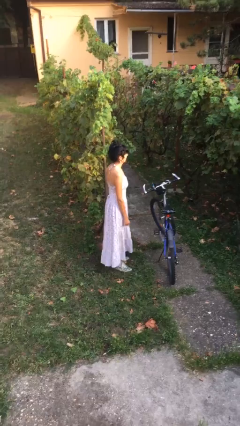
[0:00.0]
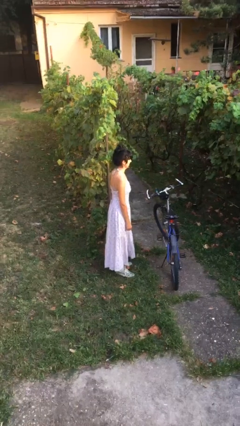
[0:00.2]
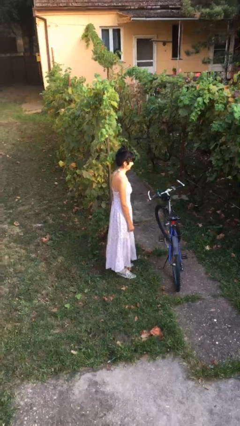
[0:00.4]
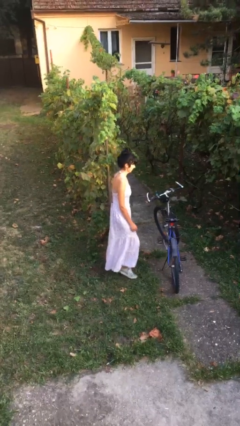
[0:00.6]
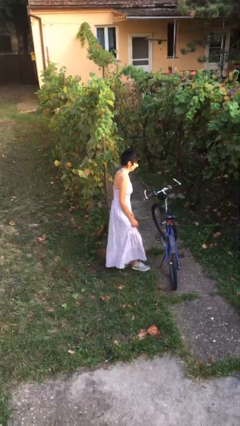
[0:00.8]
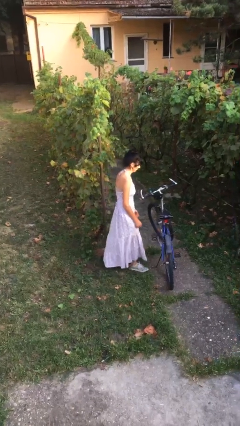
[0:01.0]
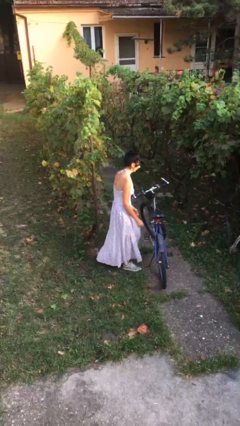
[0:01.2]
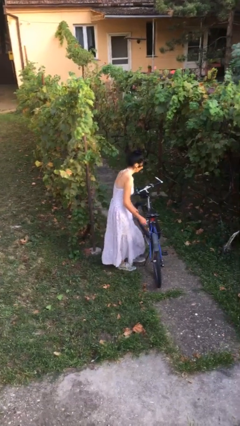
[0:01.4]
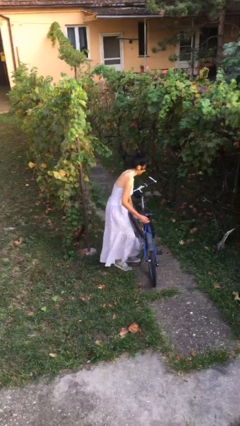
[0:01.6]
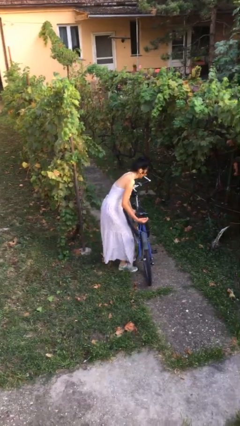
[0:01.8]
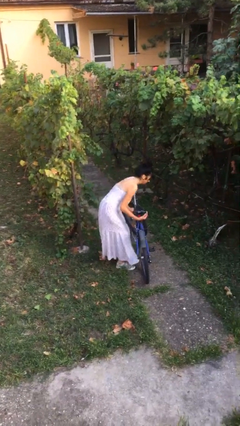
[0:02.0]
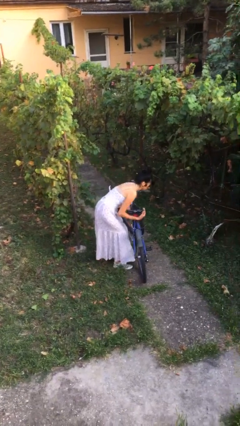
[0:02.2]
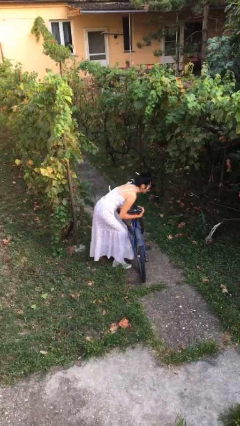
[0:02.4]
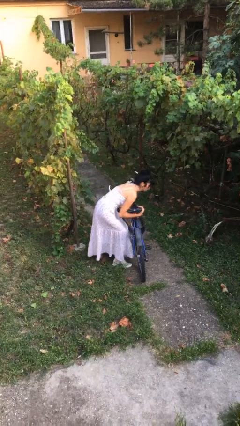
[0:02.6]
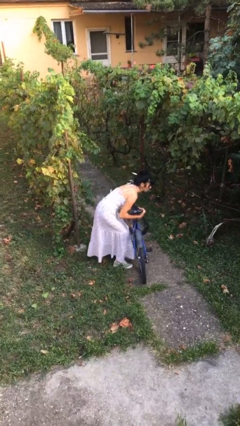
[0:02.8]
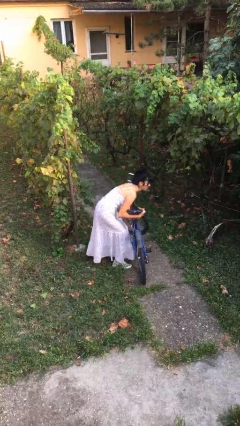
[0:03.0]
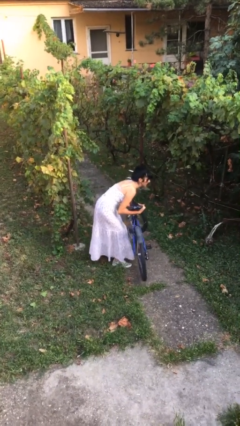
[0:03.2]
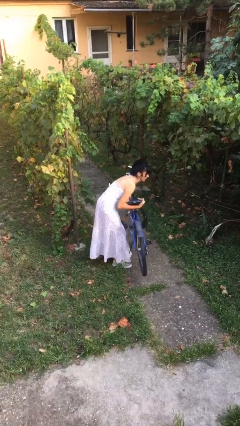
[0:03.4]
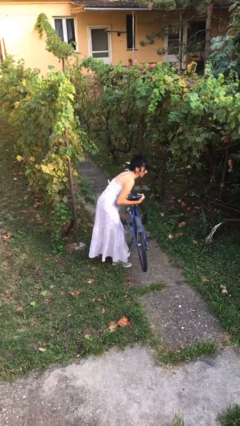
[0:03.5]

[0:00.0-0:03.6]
person picks up object from floor

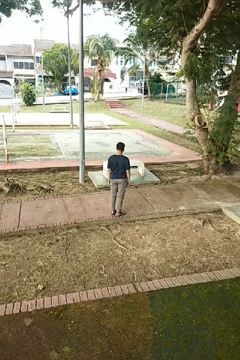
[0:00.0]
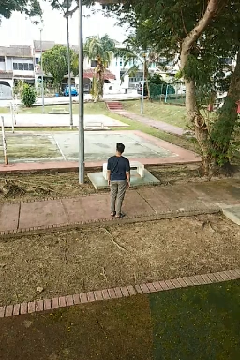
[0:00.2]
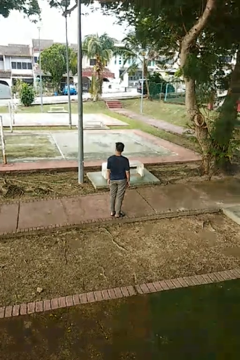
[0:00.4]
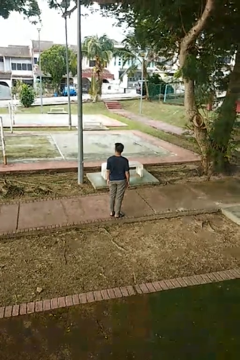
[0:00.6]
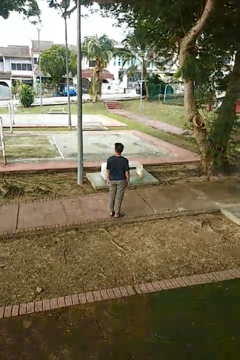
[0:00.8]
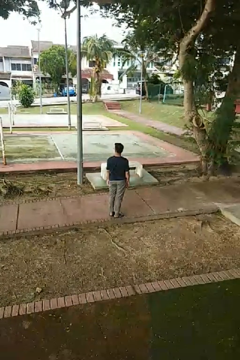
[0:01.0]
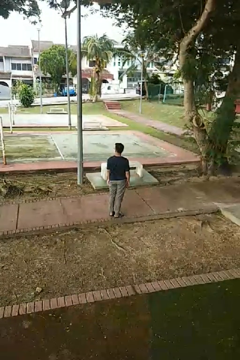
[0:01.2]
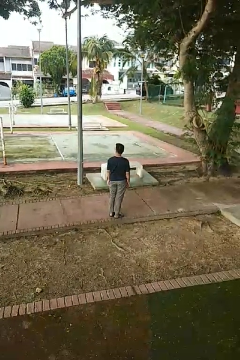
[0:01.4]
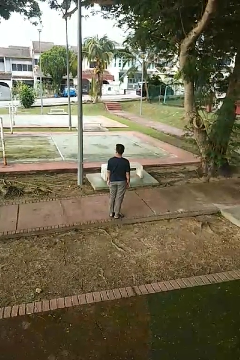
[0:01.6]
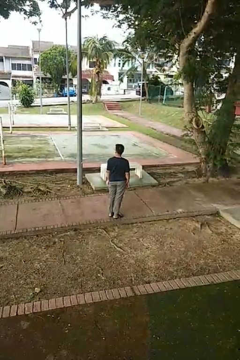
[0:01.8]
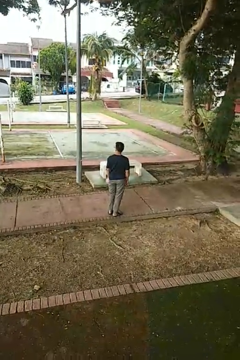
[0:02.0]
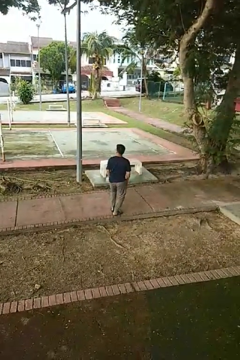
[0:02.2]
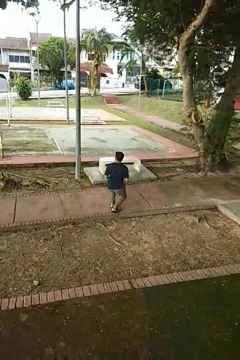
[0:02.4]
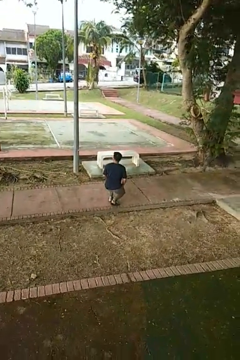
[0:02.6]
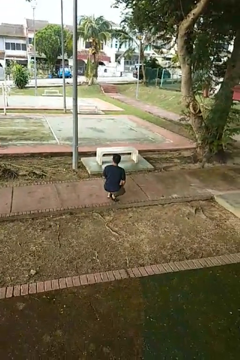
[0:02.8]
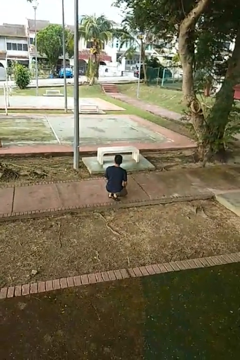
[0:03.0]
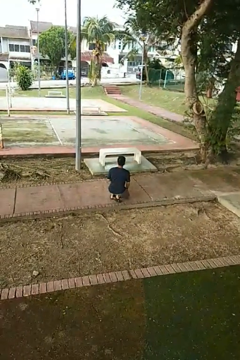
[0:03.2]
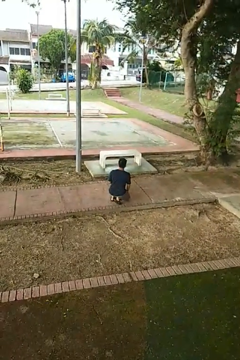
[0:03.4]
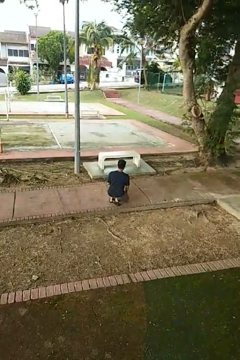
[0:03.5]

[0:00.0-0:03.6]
person kneels

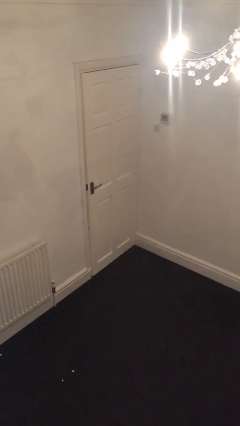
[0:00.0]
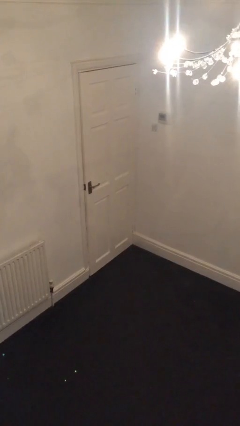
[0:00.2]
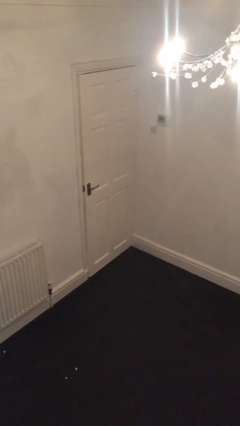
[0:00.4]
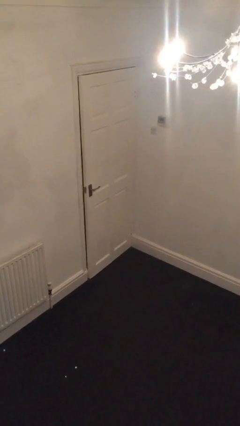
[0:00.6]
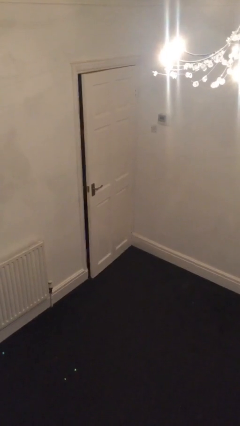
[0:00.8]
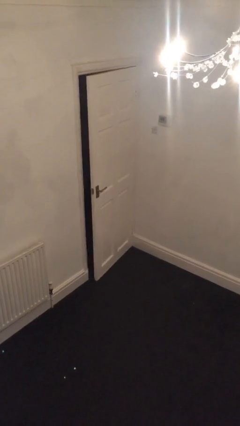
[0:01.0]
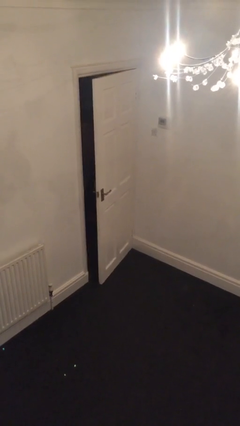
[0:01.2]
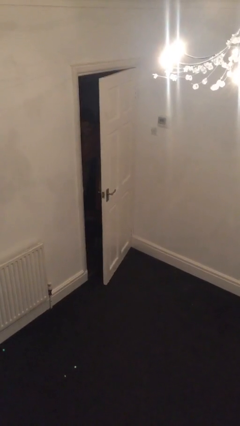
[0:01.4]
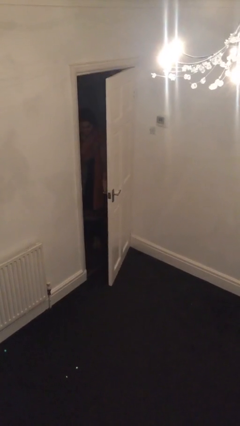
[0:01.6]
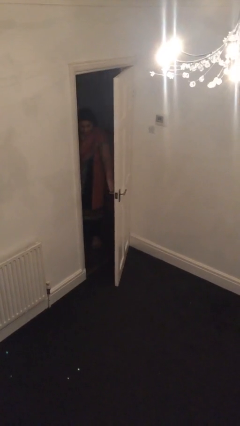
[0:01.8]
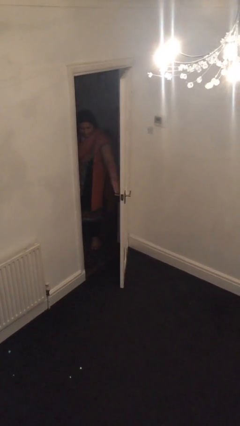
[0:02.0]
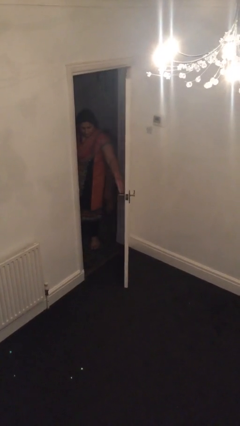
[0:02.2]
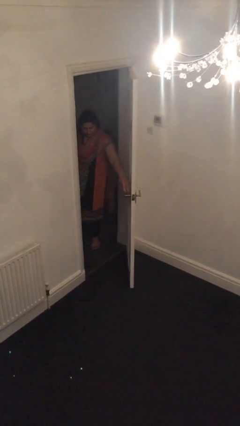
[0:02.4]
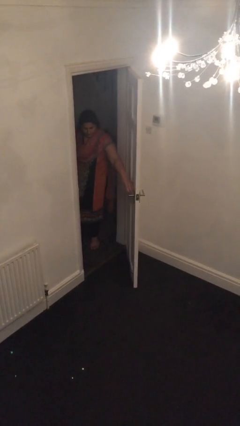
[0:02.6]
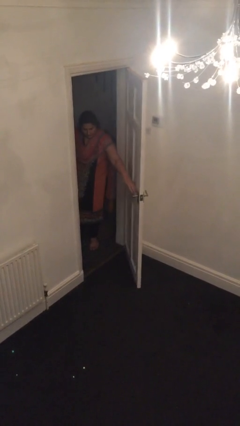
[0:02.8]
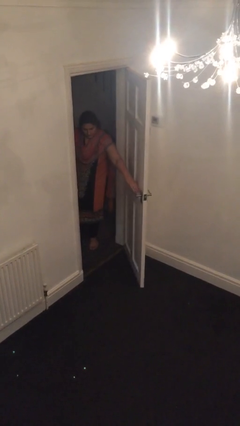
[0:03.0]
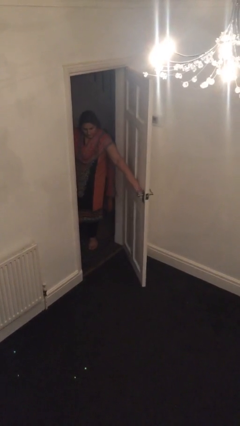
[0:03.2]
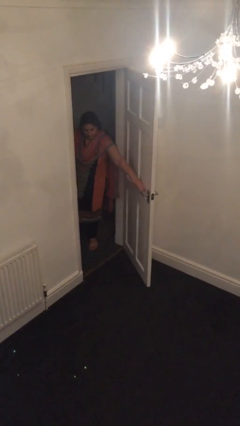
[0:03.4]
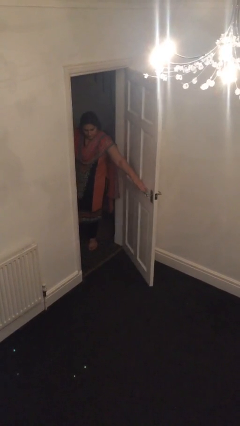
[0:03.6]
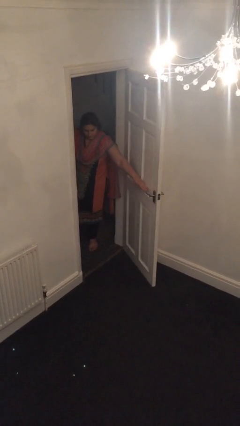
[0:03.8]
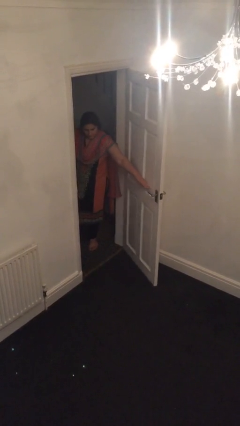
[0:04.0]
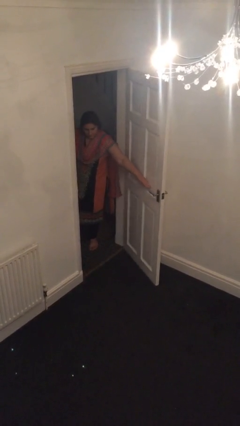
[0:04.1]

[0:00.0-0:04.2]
person opens facility door

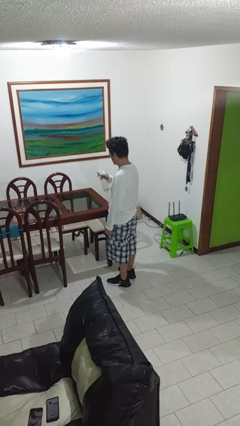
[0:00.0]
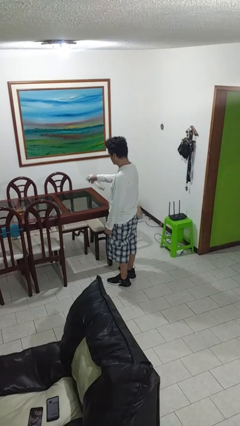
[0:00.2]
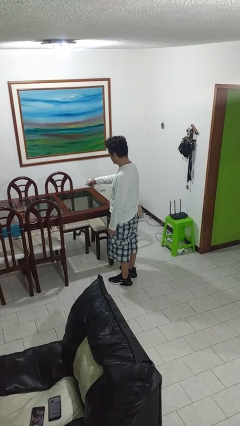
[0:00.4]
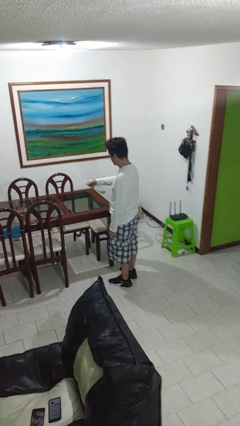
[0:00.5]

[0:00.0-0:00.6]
person sprays from bottle

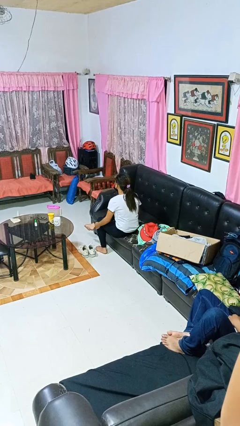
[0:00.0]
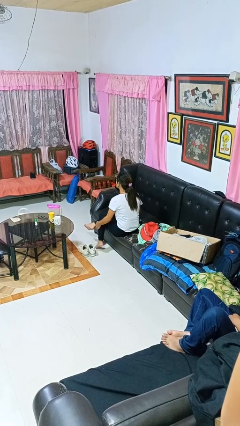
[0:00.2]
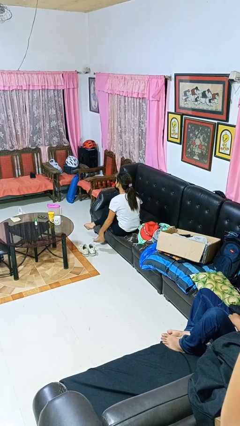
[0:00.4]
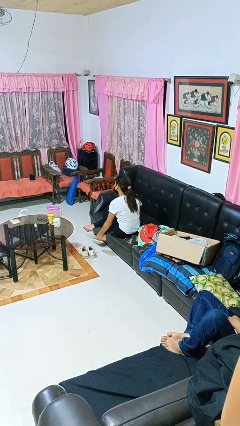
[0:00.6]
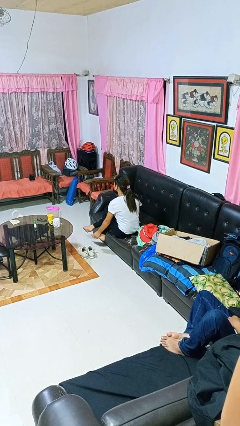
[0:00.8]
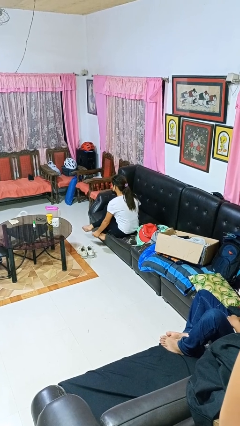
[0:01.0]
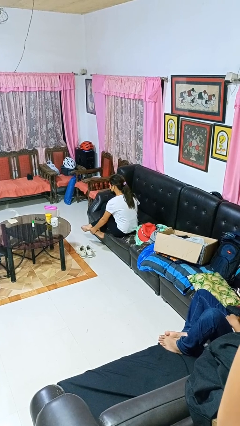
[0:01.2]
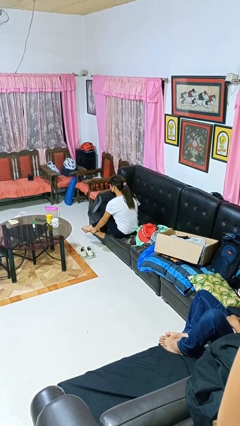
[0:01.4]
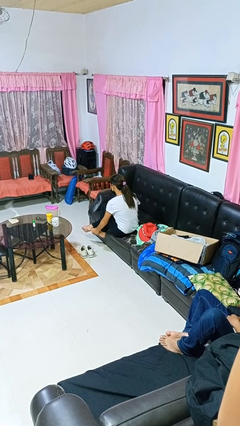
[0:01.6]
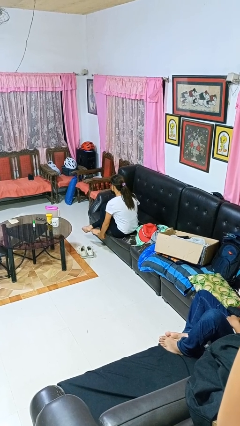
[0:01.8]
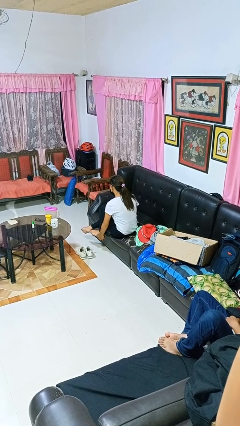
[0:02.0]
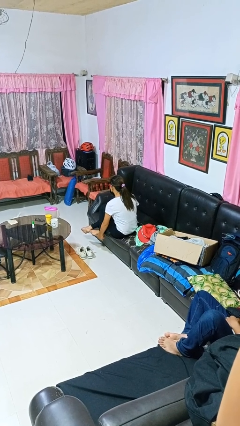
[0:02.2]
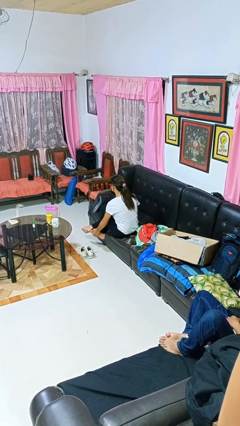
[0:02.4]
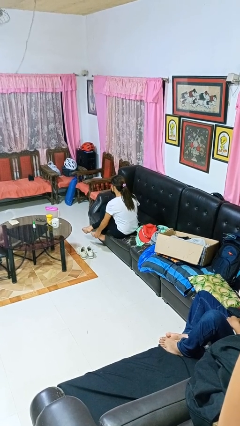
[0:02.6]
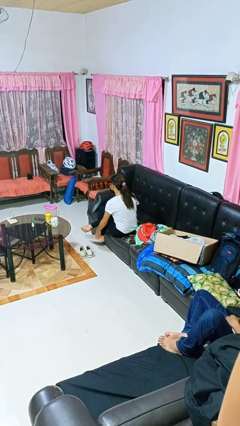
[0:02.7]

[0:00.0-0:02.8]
person rubs foot

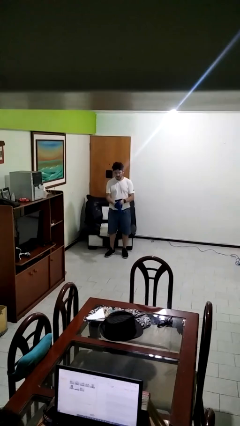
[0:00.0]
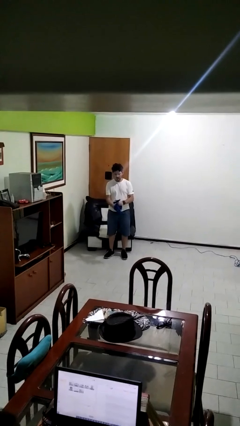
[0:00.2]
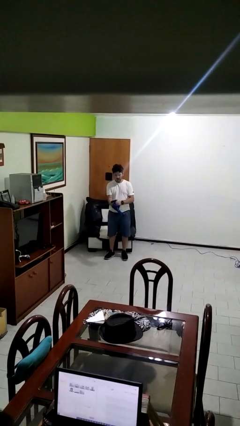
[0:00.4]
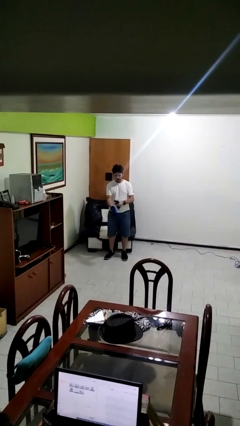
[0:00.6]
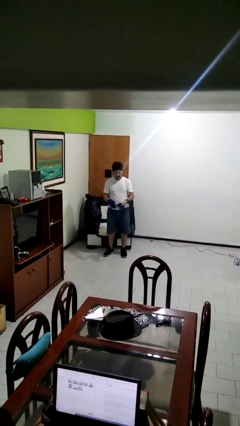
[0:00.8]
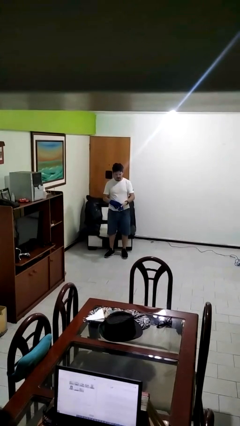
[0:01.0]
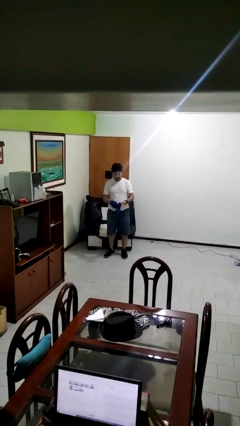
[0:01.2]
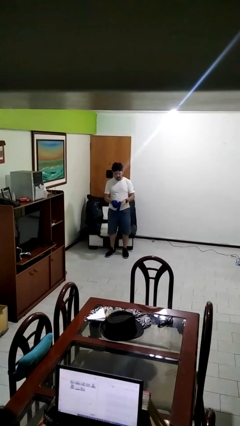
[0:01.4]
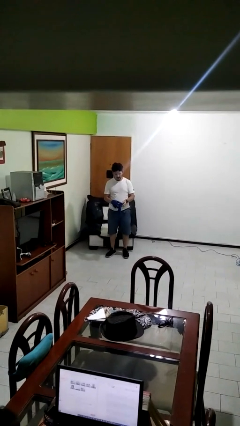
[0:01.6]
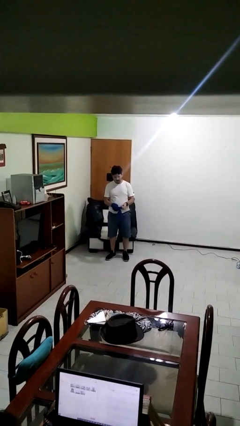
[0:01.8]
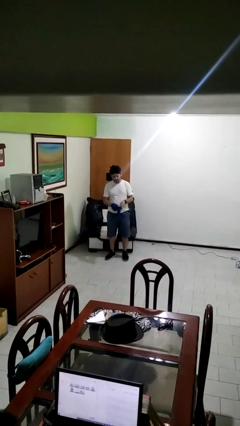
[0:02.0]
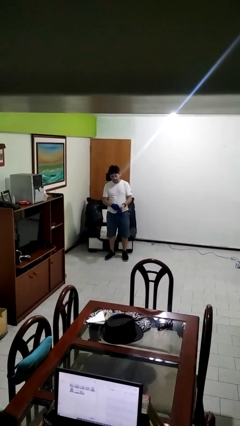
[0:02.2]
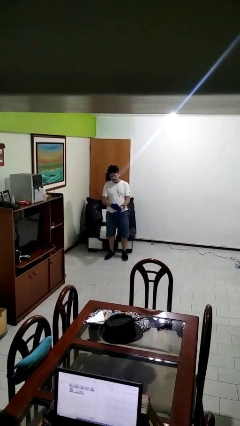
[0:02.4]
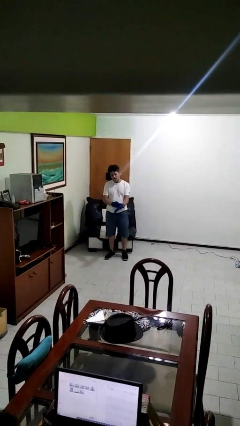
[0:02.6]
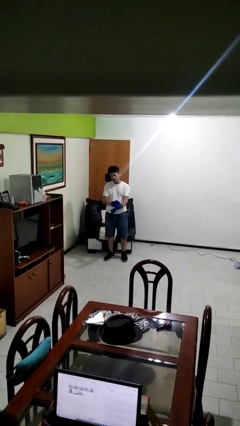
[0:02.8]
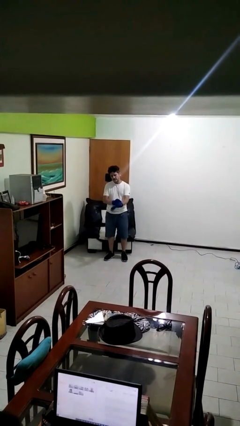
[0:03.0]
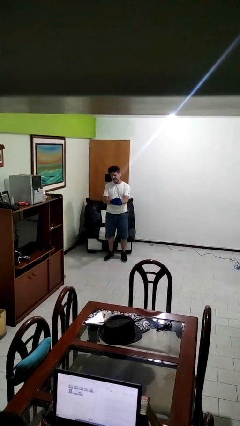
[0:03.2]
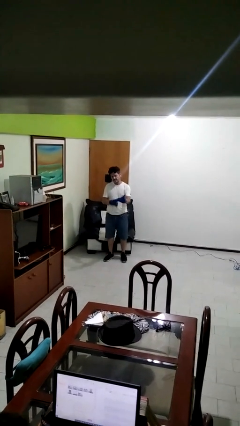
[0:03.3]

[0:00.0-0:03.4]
person puts on gloves
